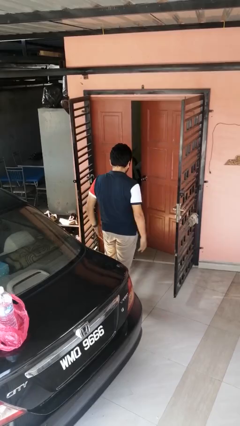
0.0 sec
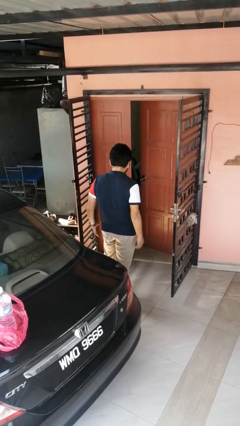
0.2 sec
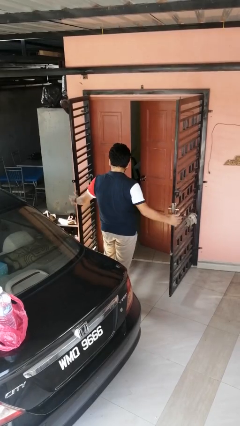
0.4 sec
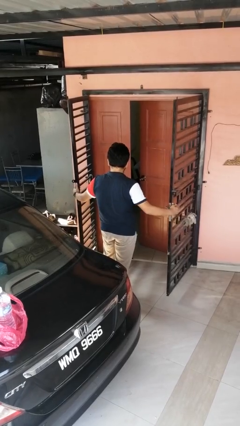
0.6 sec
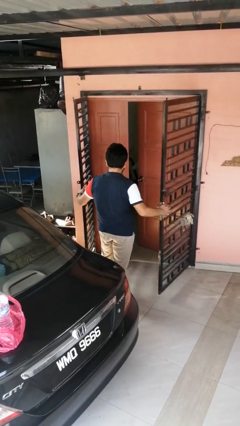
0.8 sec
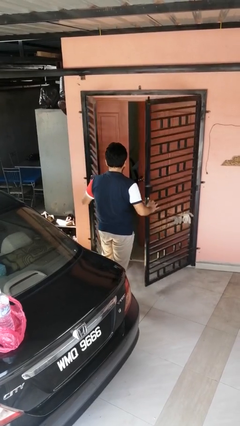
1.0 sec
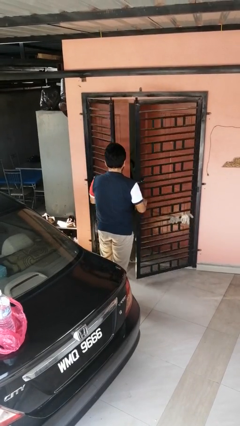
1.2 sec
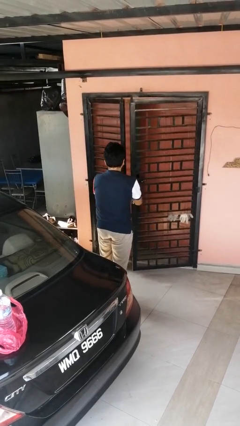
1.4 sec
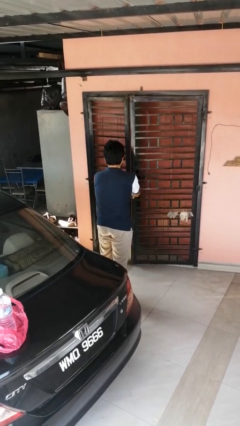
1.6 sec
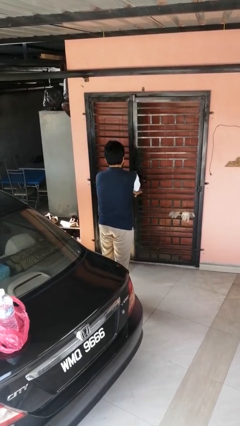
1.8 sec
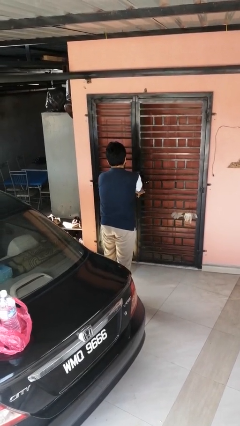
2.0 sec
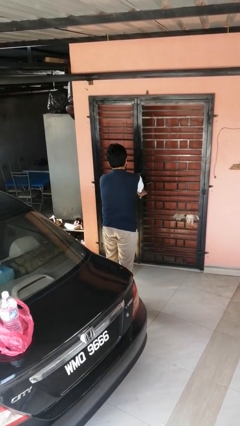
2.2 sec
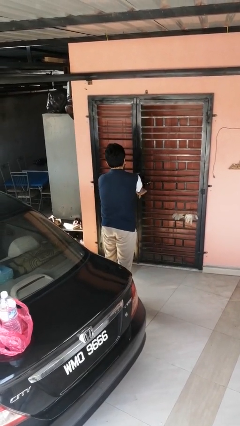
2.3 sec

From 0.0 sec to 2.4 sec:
person closes gate

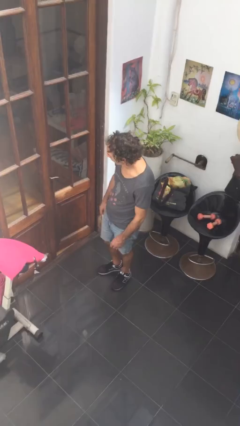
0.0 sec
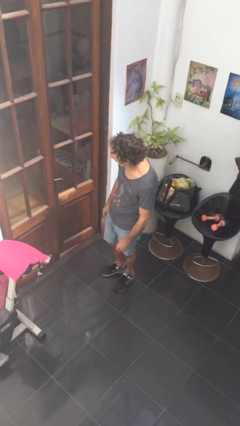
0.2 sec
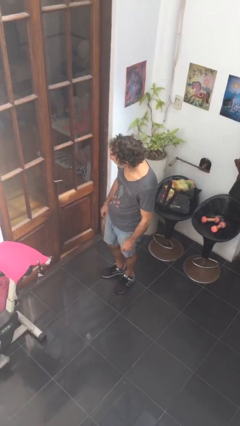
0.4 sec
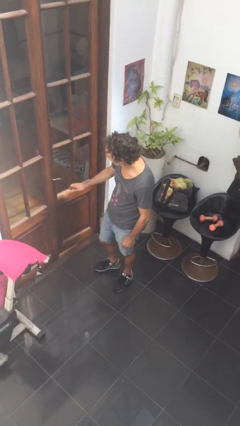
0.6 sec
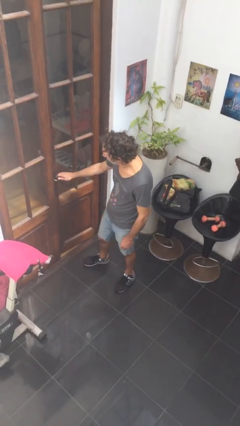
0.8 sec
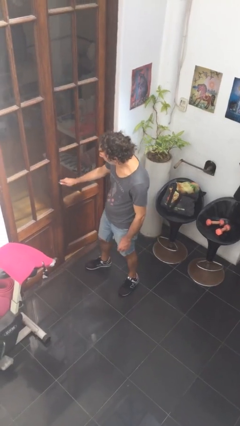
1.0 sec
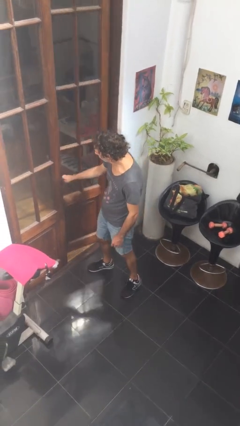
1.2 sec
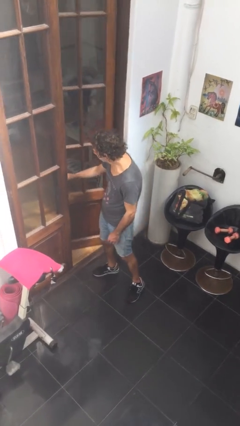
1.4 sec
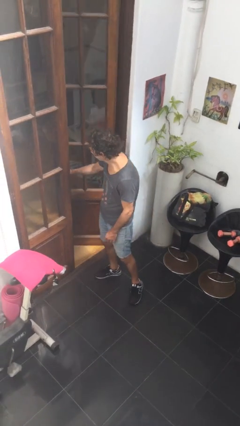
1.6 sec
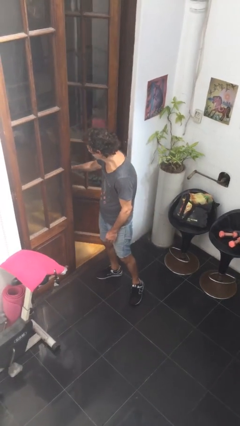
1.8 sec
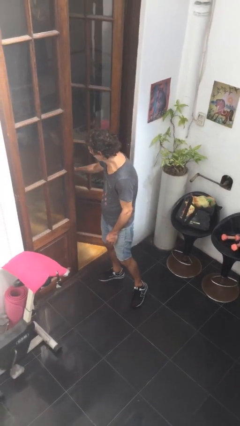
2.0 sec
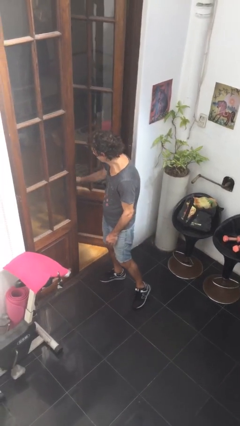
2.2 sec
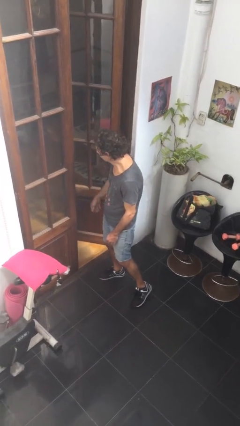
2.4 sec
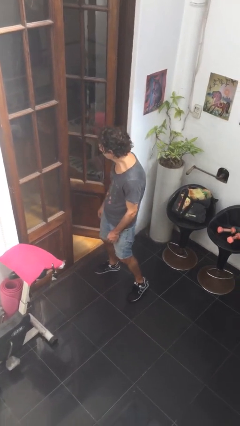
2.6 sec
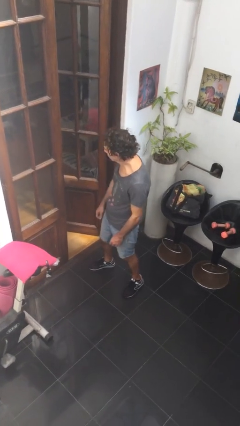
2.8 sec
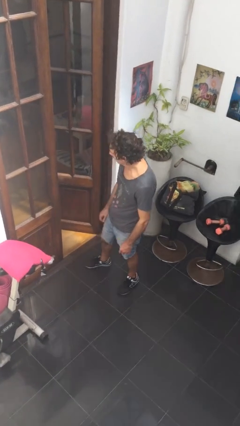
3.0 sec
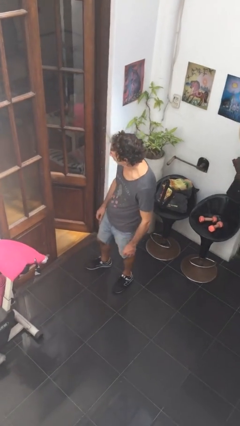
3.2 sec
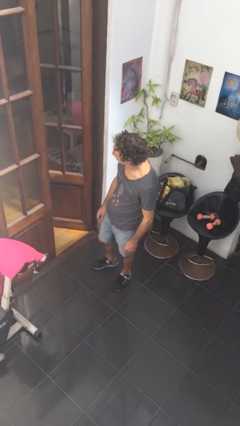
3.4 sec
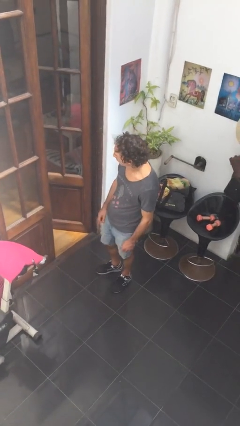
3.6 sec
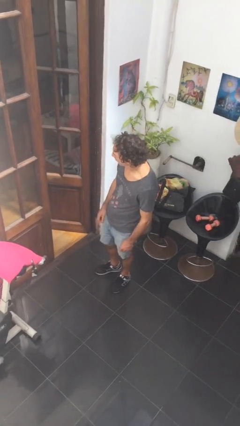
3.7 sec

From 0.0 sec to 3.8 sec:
person opens facility door

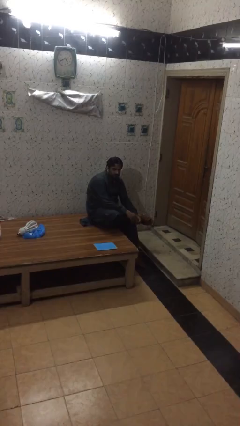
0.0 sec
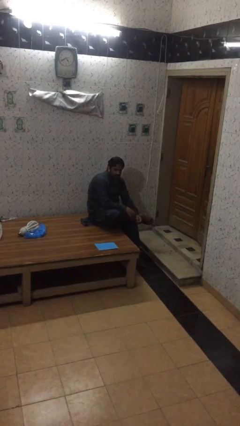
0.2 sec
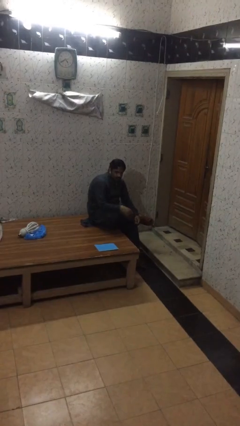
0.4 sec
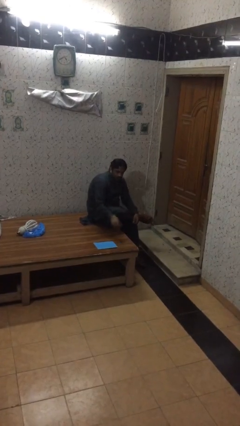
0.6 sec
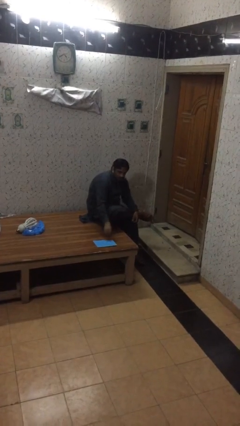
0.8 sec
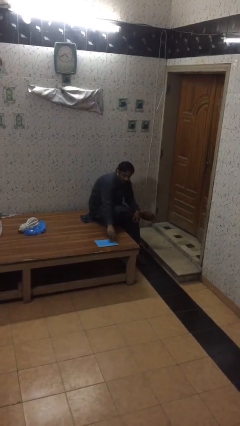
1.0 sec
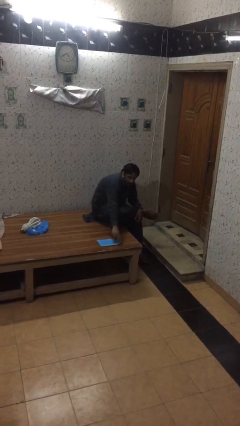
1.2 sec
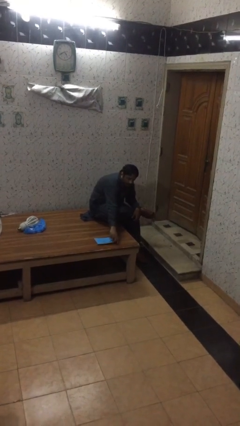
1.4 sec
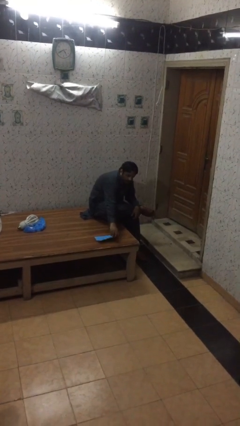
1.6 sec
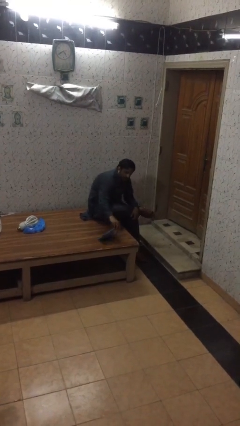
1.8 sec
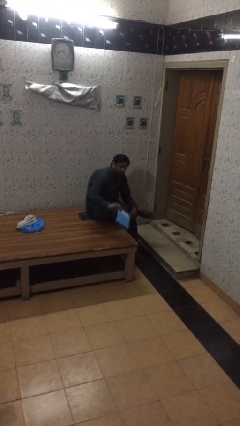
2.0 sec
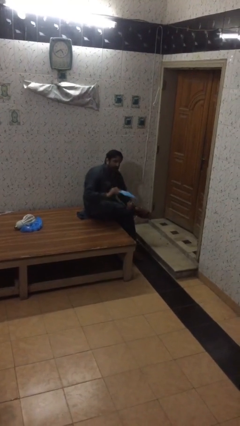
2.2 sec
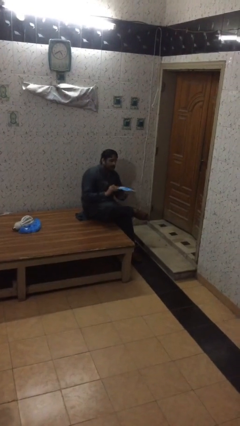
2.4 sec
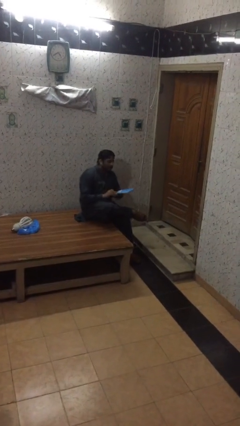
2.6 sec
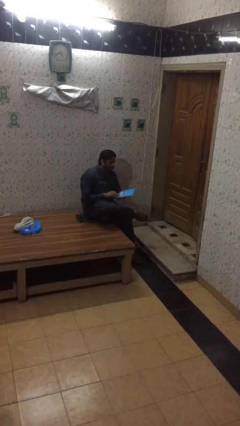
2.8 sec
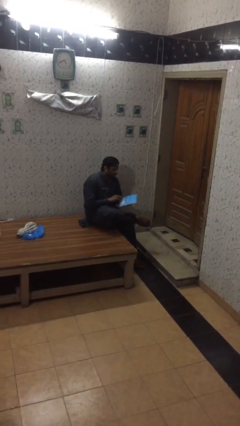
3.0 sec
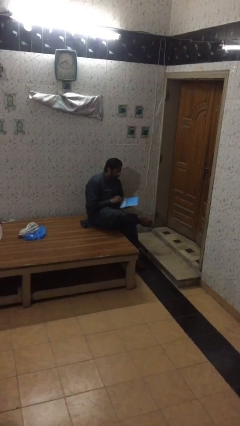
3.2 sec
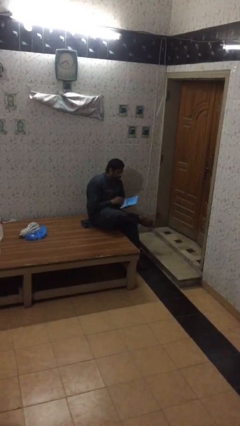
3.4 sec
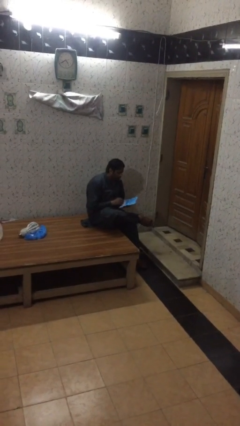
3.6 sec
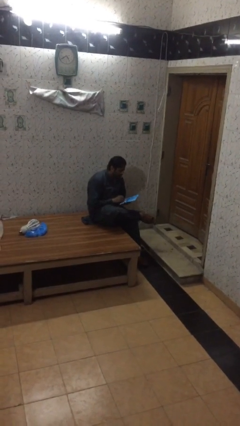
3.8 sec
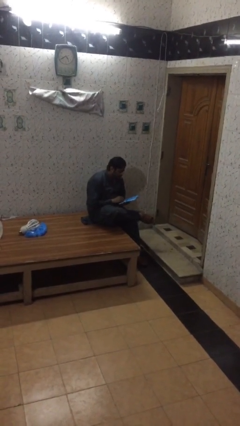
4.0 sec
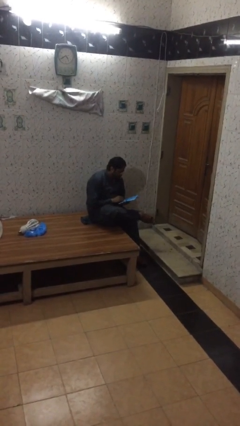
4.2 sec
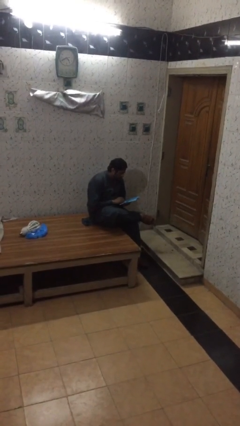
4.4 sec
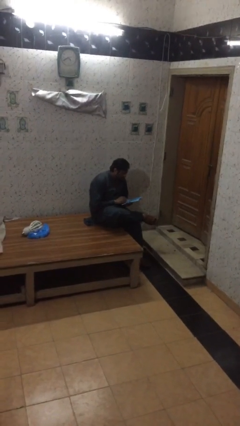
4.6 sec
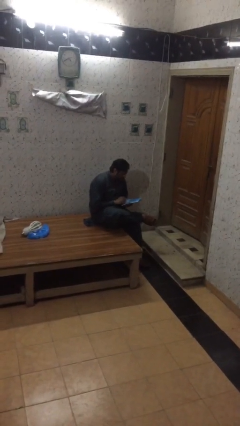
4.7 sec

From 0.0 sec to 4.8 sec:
person picks up object from table

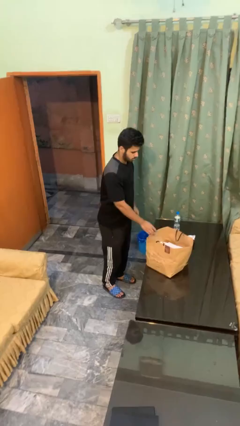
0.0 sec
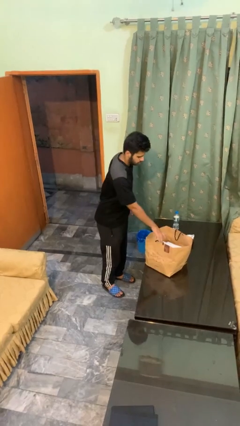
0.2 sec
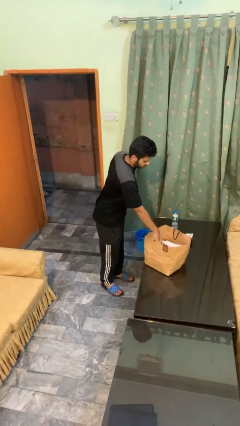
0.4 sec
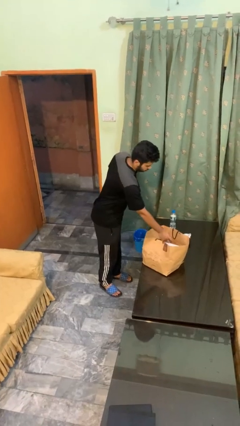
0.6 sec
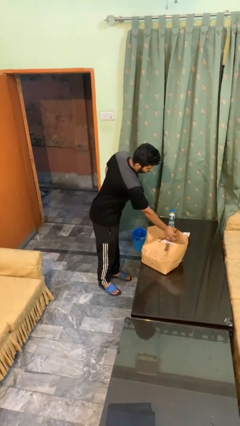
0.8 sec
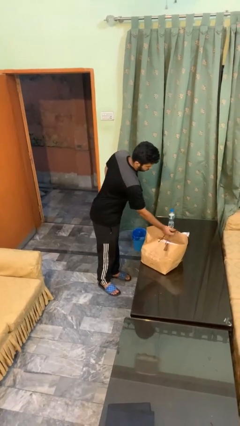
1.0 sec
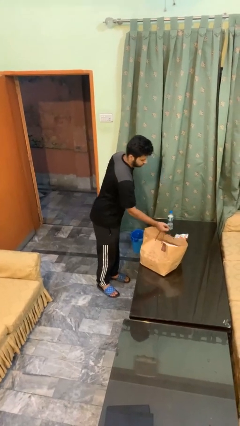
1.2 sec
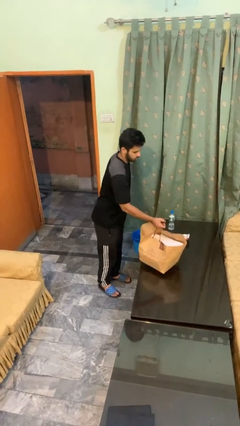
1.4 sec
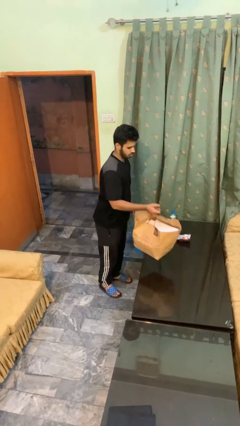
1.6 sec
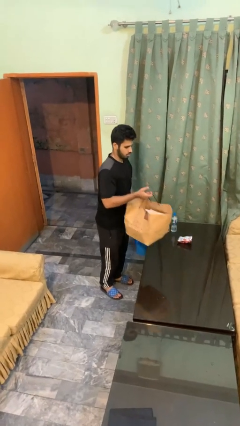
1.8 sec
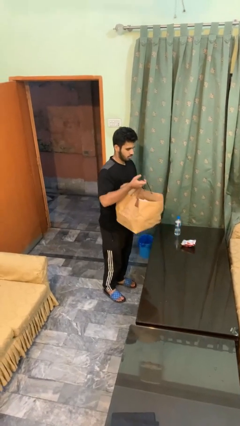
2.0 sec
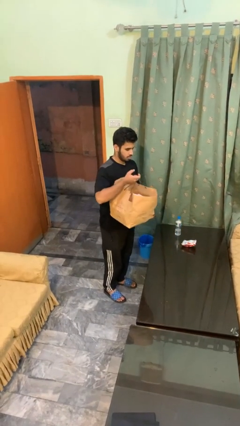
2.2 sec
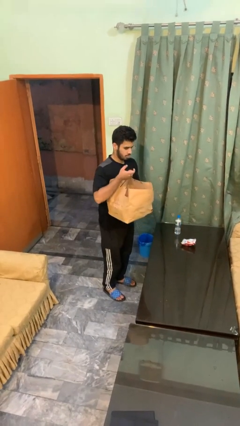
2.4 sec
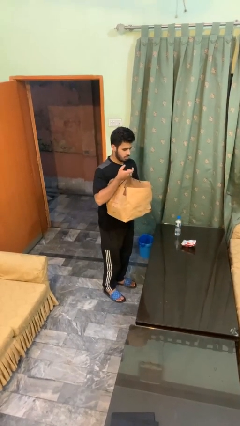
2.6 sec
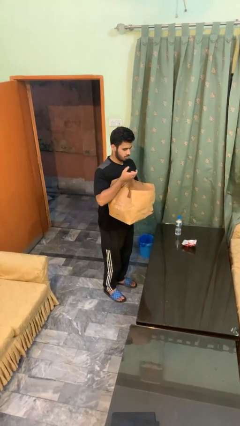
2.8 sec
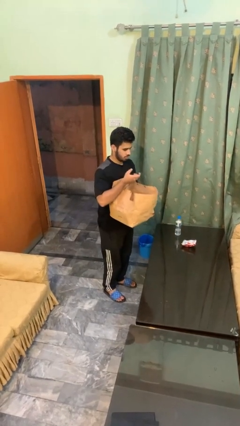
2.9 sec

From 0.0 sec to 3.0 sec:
person picks up object from countertop

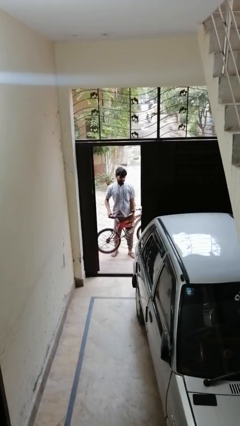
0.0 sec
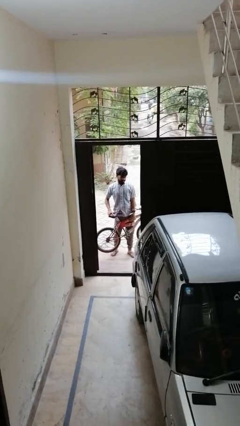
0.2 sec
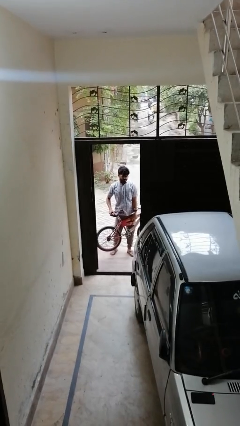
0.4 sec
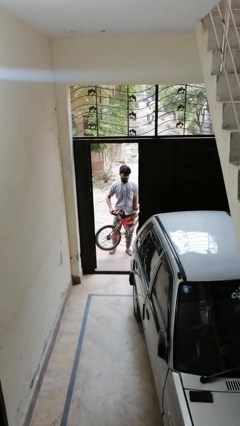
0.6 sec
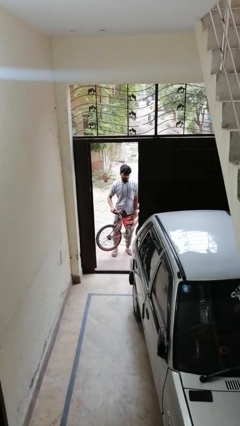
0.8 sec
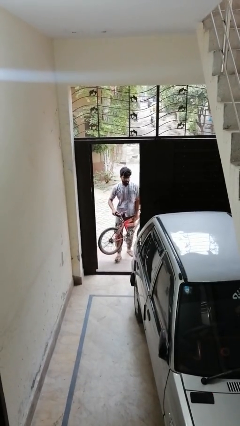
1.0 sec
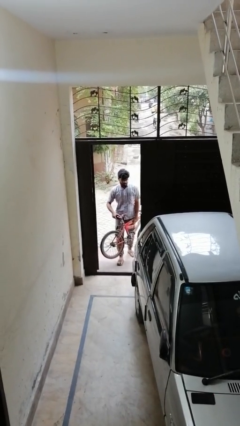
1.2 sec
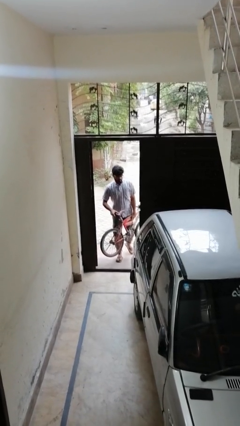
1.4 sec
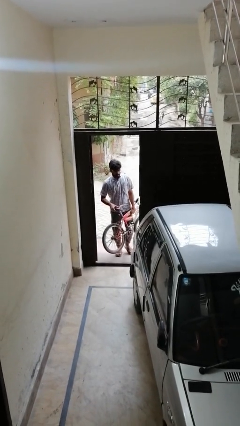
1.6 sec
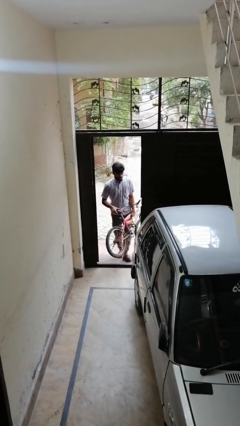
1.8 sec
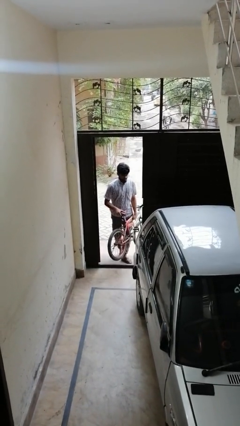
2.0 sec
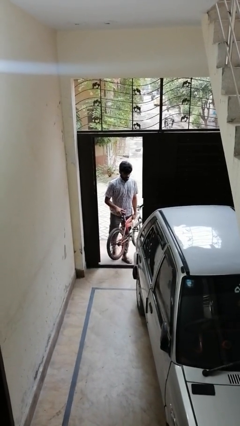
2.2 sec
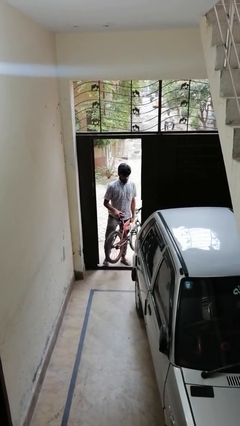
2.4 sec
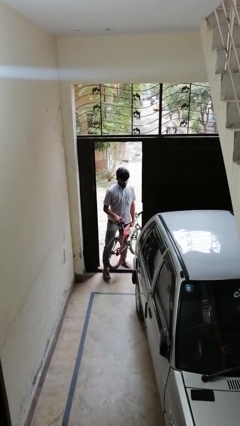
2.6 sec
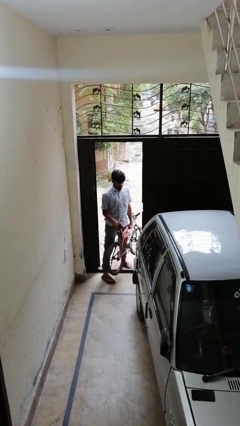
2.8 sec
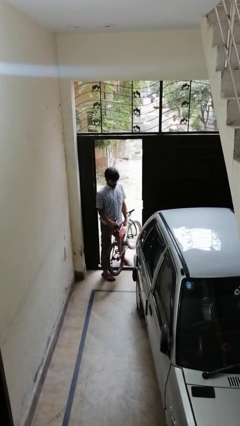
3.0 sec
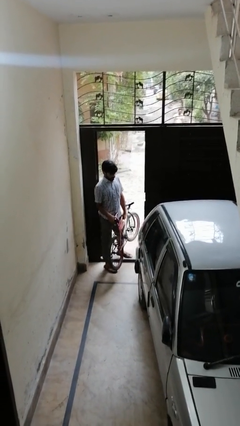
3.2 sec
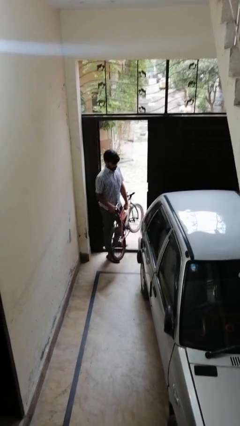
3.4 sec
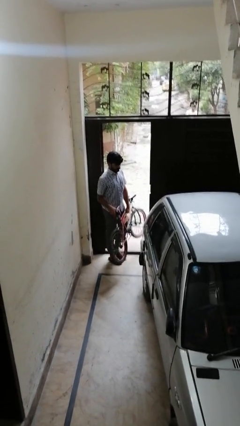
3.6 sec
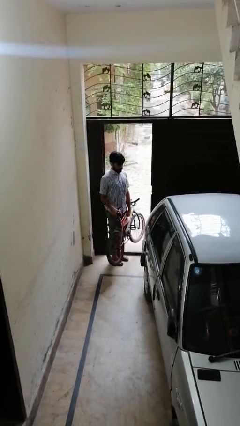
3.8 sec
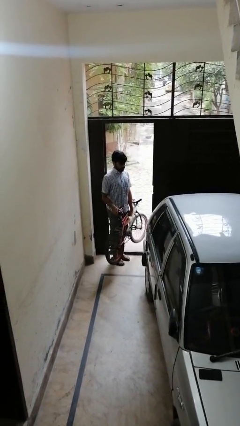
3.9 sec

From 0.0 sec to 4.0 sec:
person carries bicycle
